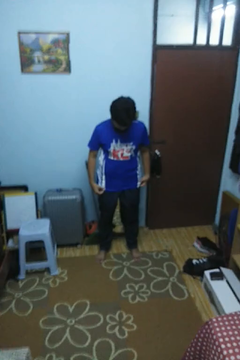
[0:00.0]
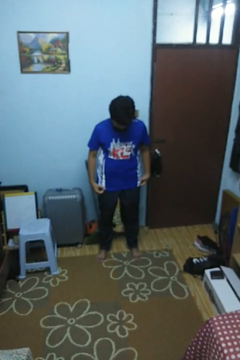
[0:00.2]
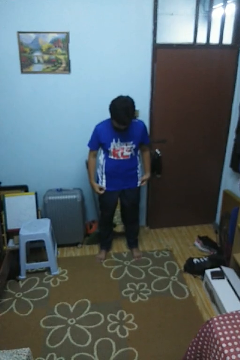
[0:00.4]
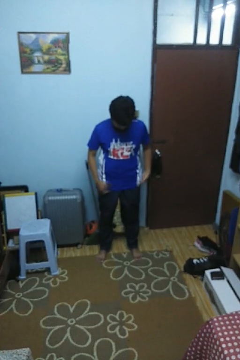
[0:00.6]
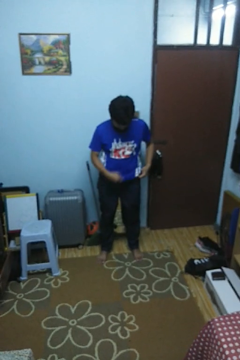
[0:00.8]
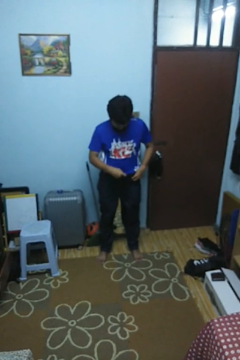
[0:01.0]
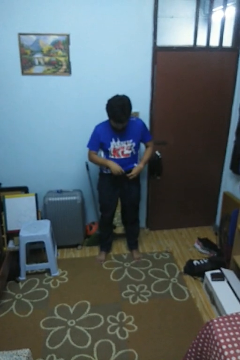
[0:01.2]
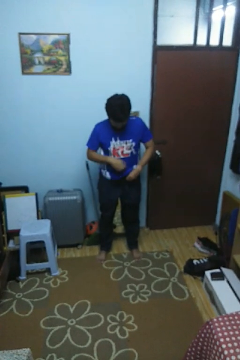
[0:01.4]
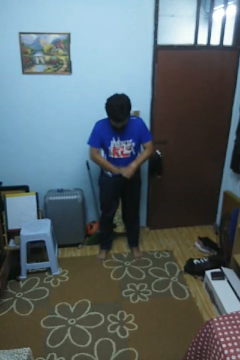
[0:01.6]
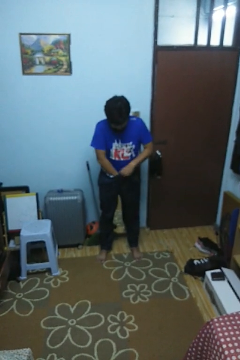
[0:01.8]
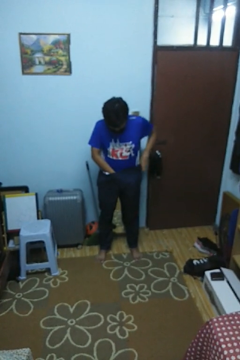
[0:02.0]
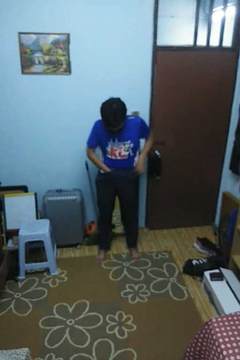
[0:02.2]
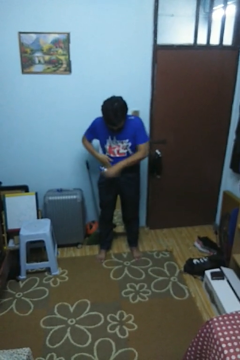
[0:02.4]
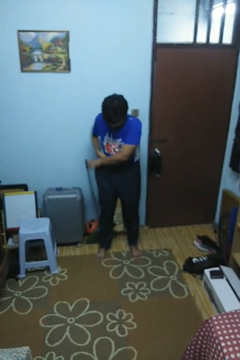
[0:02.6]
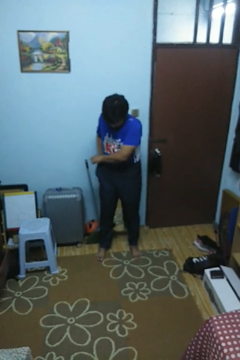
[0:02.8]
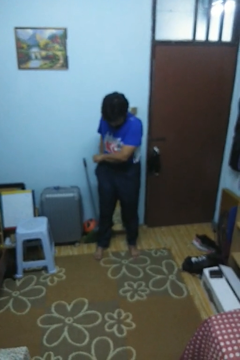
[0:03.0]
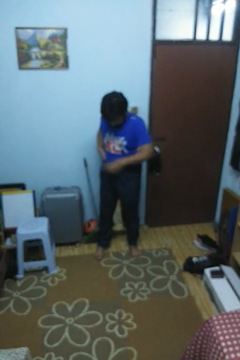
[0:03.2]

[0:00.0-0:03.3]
person tucks in shirt

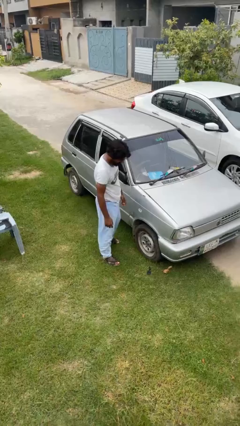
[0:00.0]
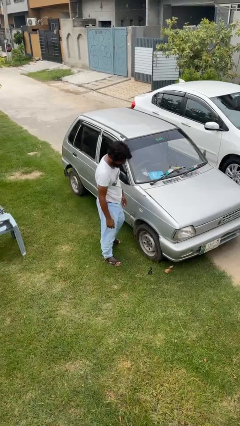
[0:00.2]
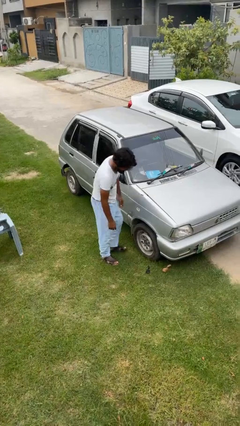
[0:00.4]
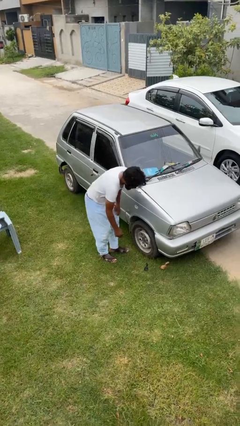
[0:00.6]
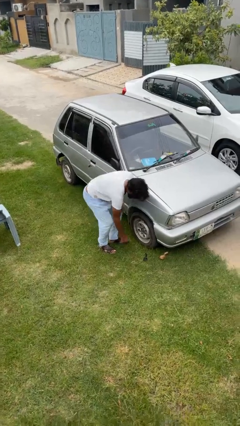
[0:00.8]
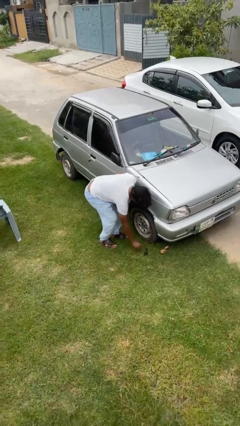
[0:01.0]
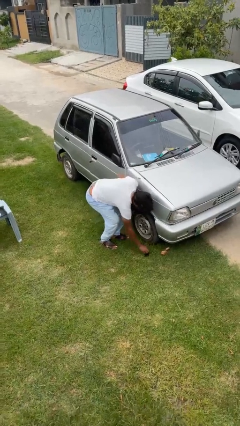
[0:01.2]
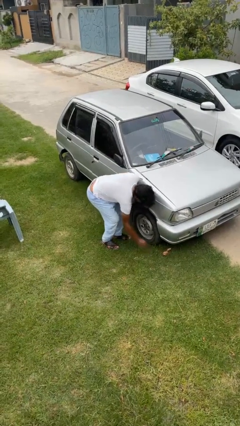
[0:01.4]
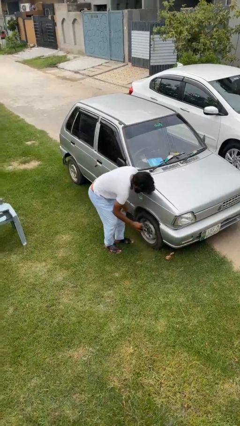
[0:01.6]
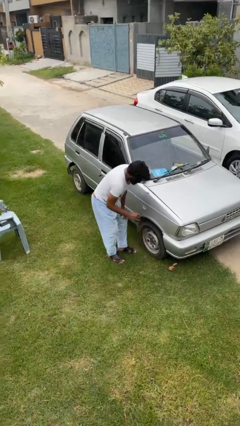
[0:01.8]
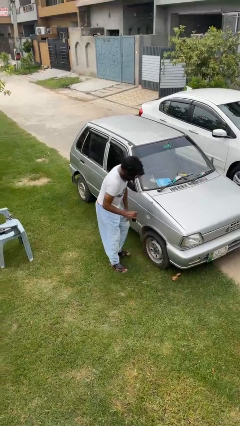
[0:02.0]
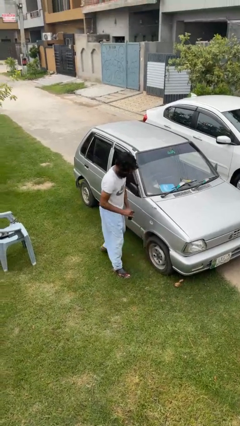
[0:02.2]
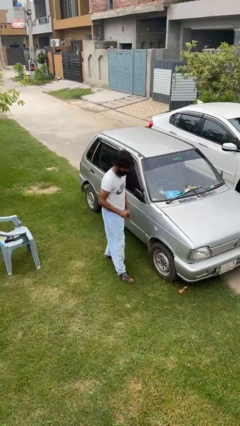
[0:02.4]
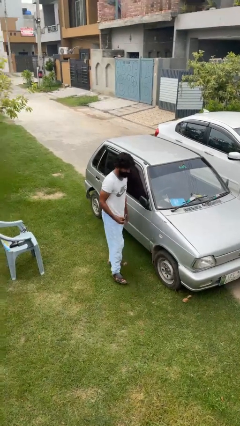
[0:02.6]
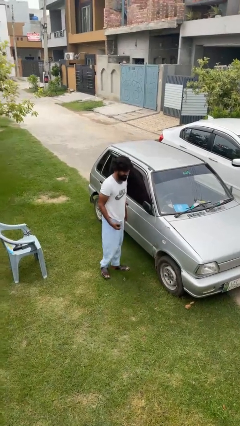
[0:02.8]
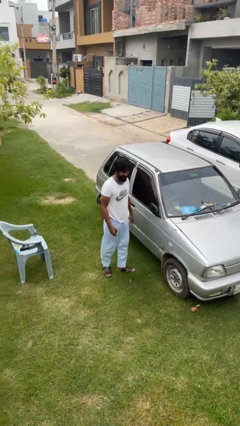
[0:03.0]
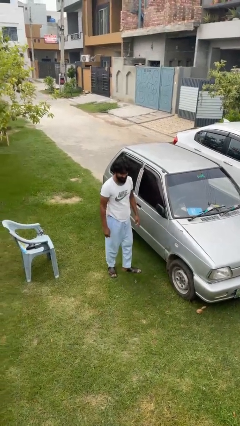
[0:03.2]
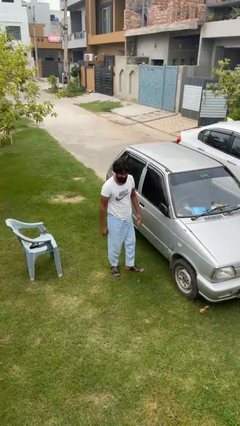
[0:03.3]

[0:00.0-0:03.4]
person picks up object from floor

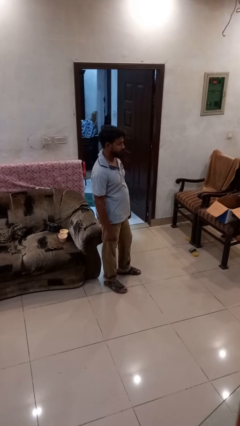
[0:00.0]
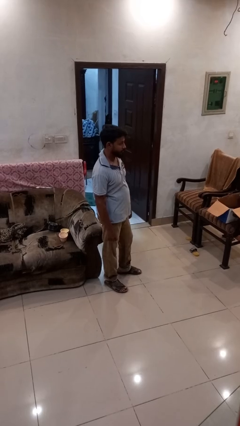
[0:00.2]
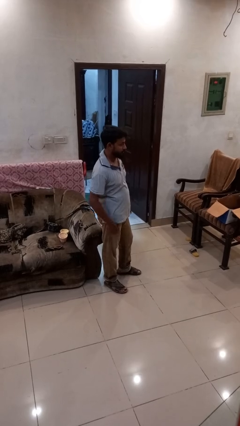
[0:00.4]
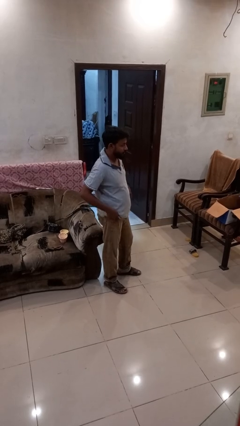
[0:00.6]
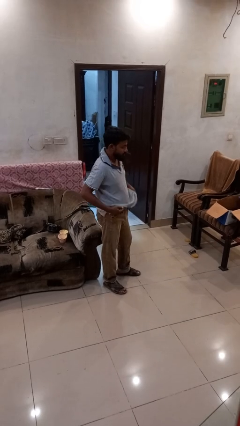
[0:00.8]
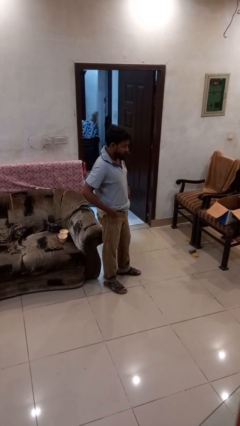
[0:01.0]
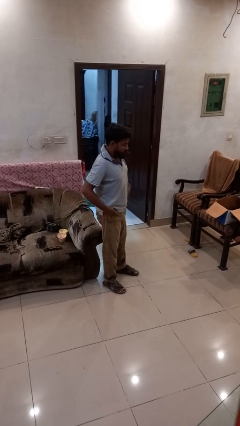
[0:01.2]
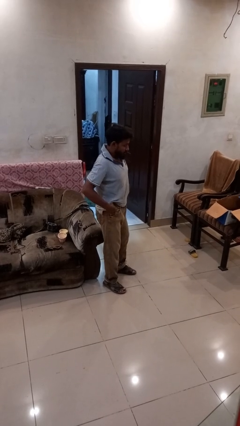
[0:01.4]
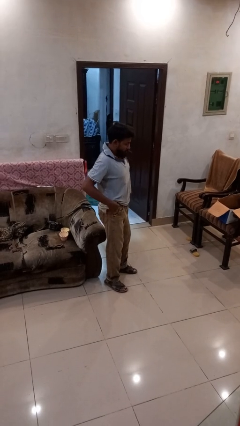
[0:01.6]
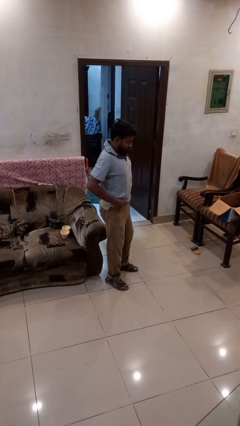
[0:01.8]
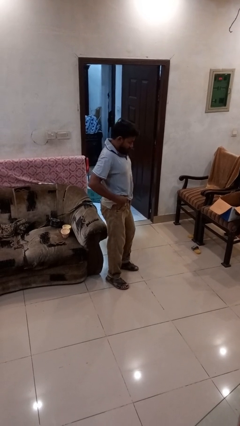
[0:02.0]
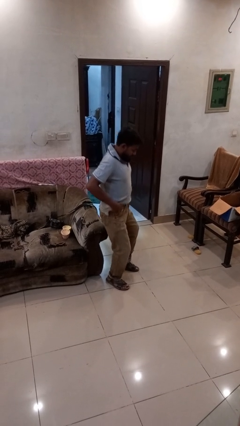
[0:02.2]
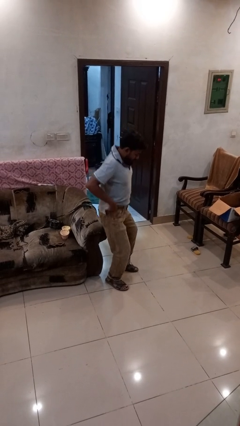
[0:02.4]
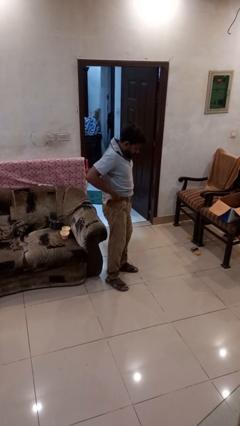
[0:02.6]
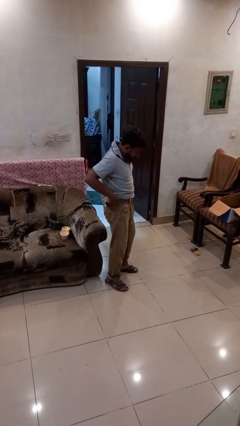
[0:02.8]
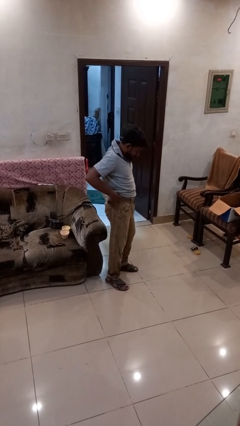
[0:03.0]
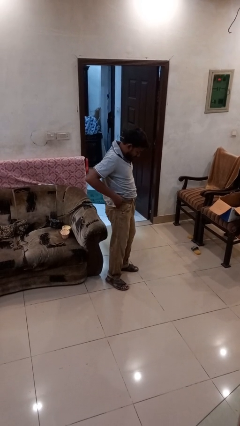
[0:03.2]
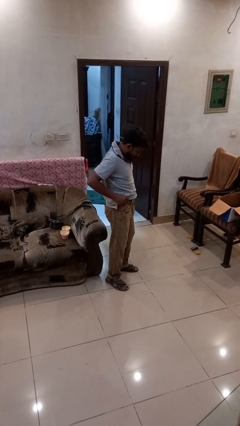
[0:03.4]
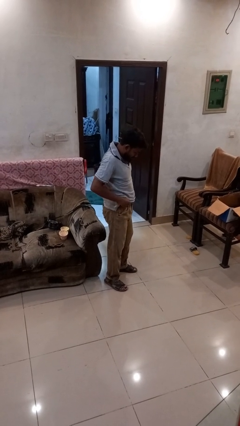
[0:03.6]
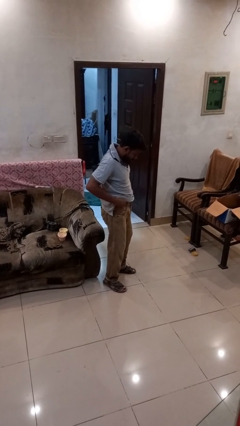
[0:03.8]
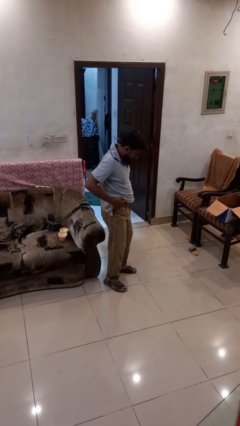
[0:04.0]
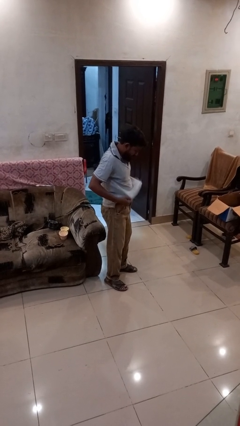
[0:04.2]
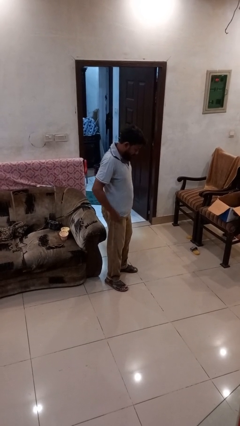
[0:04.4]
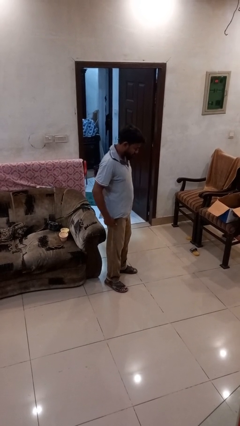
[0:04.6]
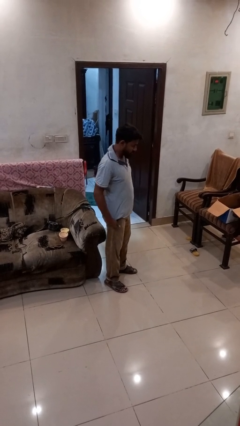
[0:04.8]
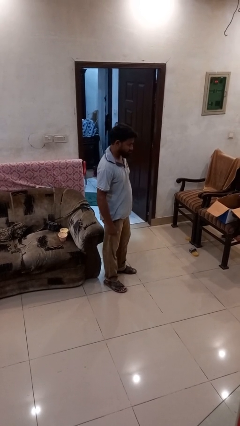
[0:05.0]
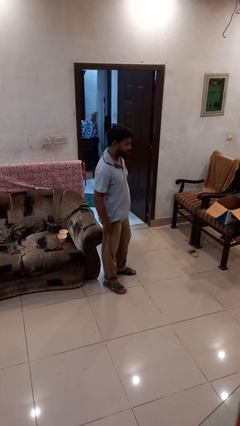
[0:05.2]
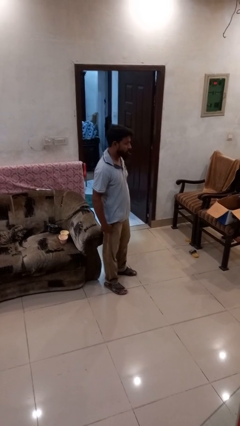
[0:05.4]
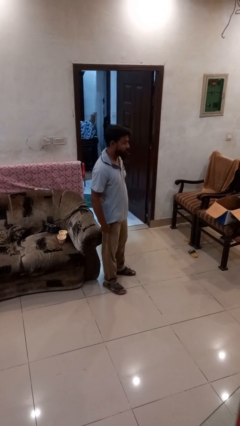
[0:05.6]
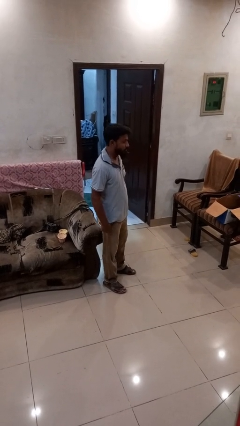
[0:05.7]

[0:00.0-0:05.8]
person hikes up pants

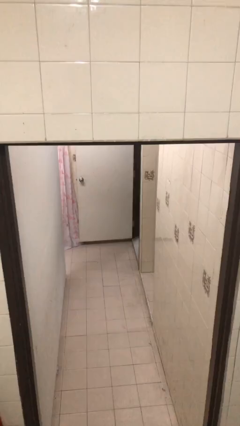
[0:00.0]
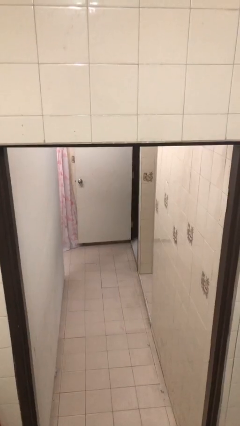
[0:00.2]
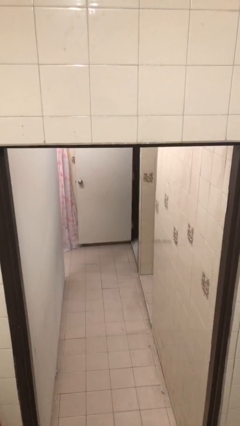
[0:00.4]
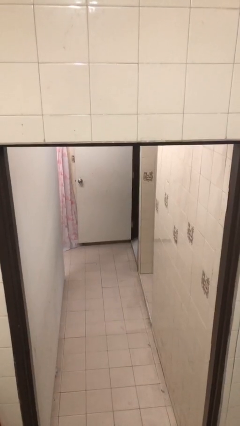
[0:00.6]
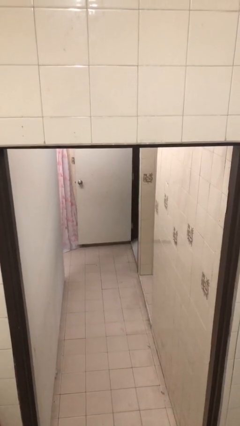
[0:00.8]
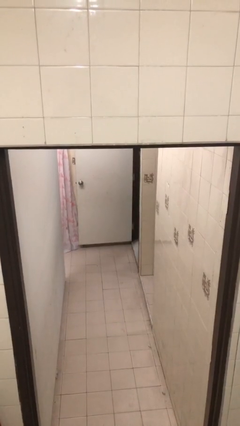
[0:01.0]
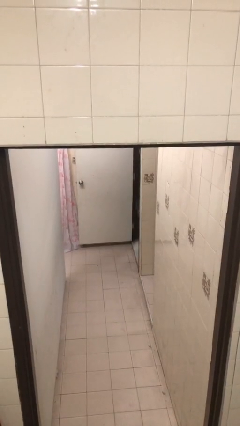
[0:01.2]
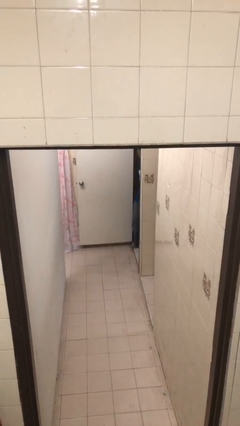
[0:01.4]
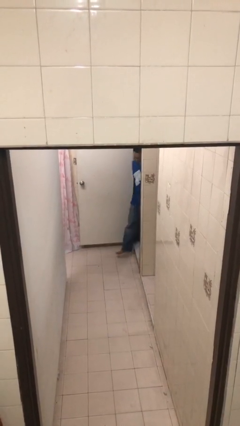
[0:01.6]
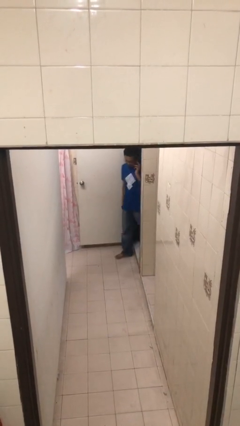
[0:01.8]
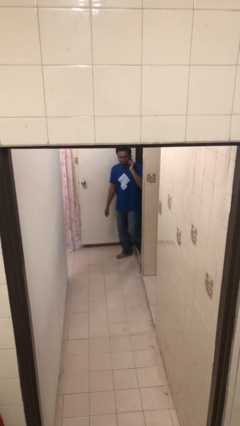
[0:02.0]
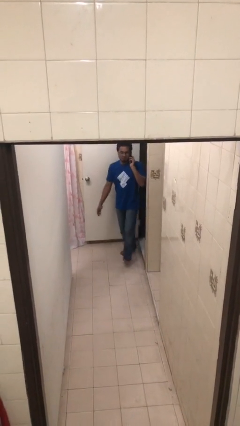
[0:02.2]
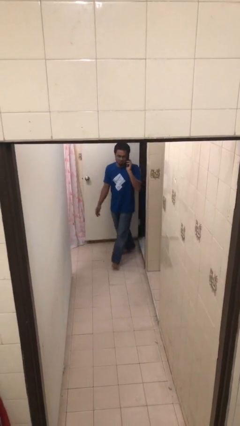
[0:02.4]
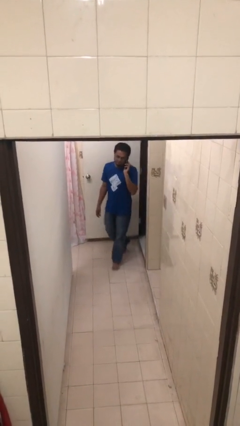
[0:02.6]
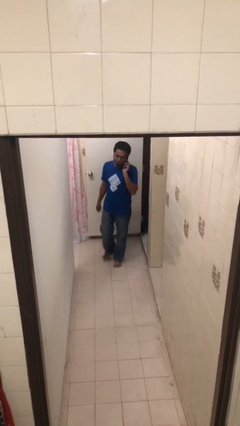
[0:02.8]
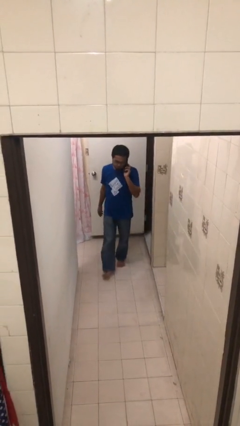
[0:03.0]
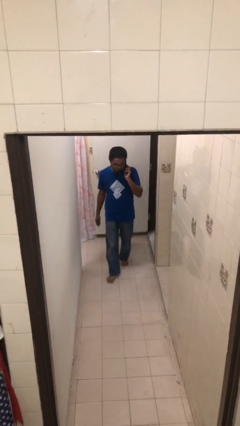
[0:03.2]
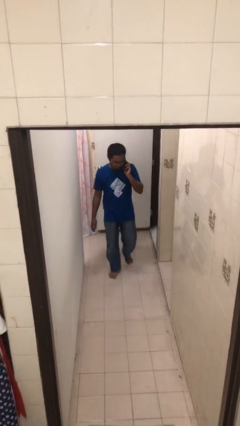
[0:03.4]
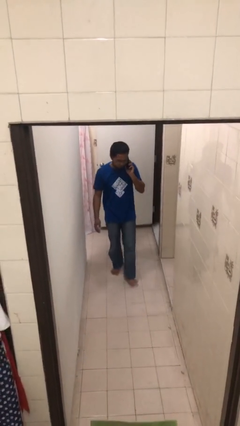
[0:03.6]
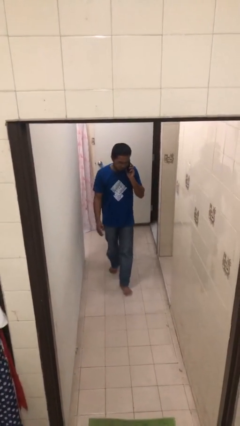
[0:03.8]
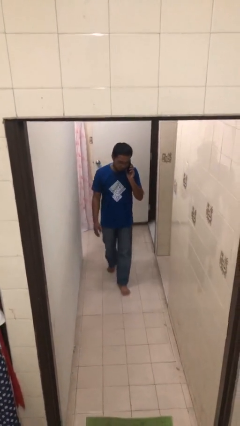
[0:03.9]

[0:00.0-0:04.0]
person enters scene through structure

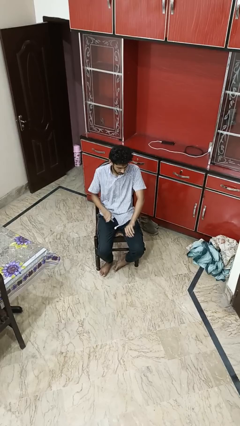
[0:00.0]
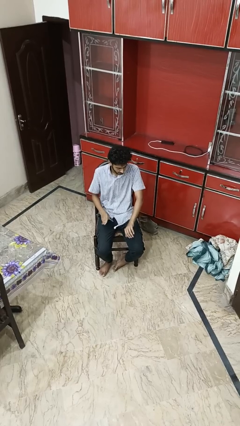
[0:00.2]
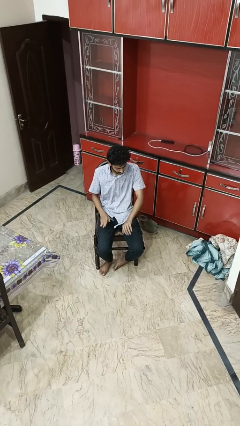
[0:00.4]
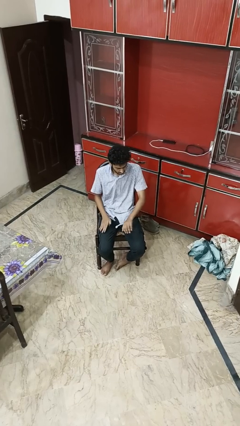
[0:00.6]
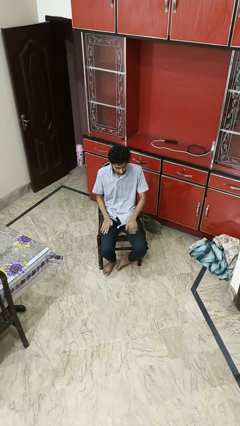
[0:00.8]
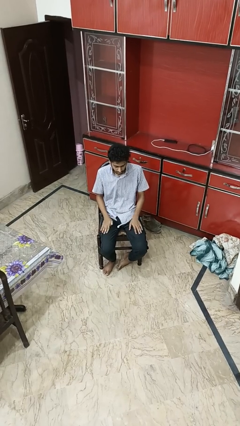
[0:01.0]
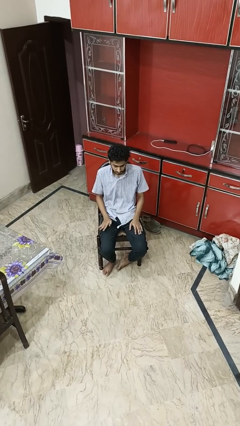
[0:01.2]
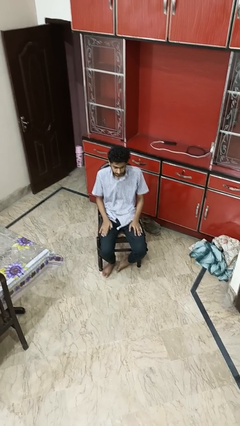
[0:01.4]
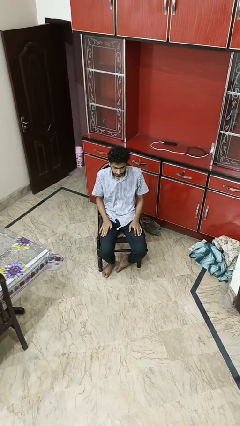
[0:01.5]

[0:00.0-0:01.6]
person swats bug

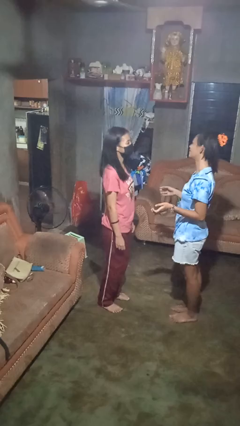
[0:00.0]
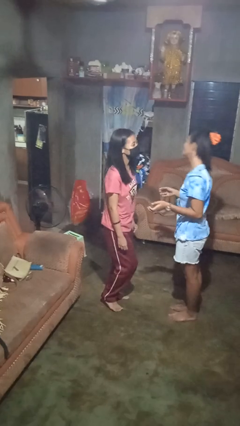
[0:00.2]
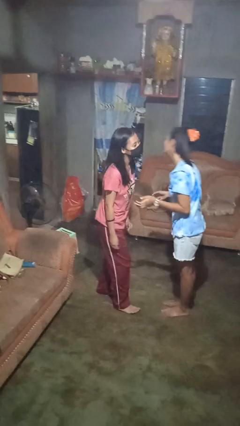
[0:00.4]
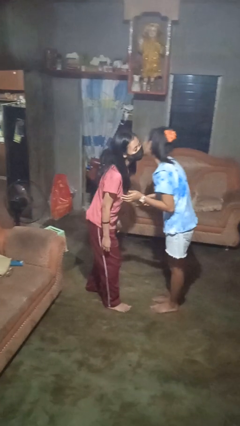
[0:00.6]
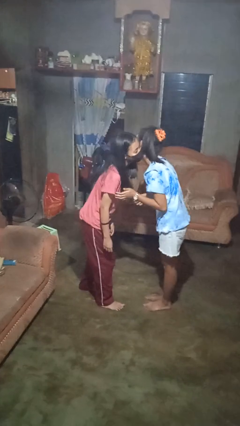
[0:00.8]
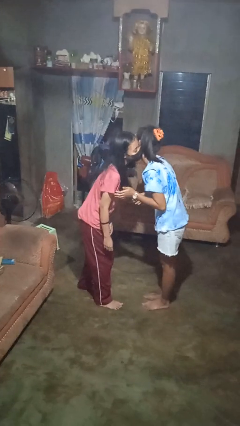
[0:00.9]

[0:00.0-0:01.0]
person kisses cheek of person
